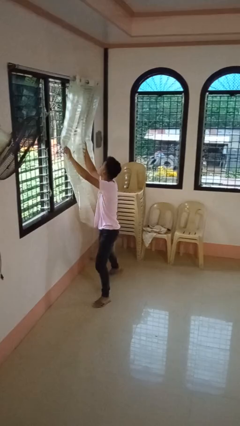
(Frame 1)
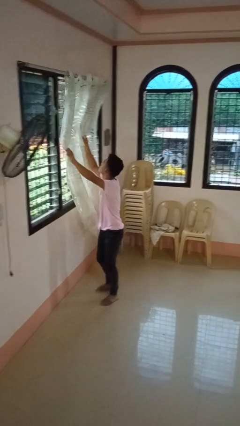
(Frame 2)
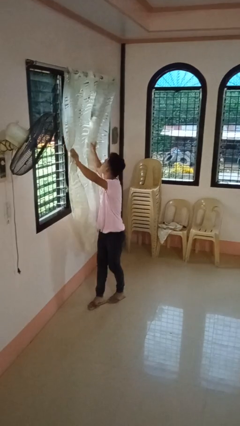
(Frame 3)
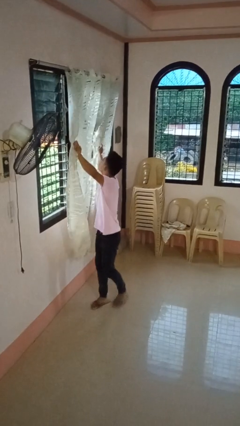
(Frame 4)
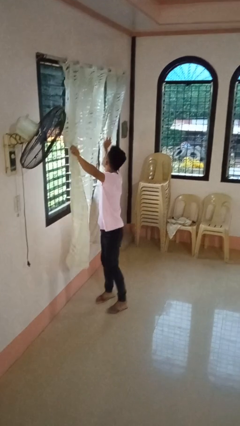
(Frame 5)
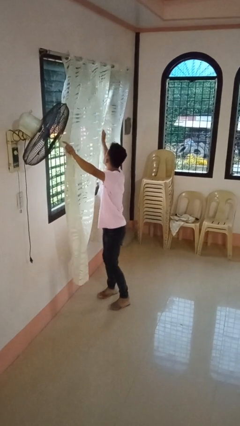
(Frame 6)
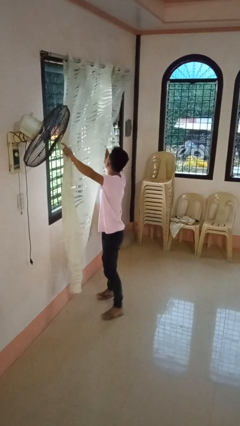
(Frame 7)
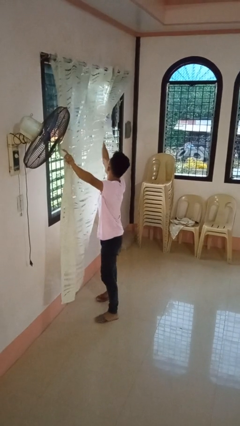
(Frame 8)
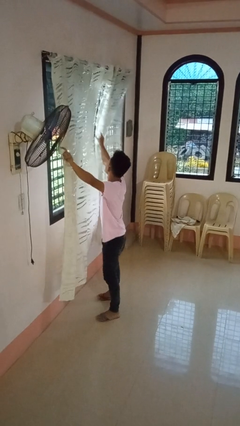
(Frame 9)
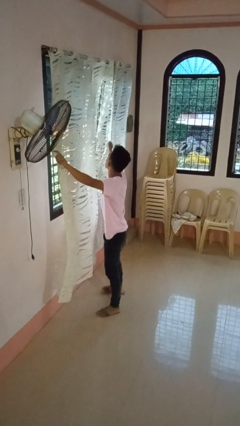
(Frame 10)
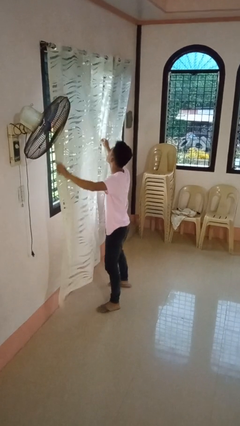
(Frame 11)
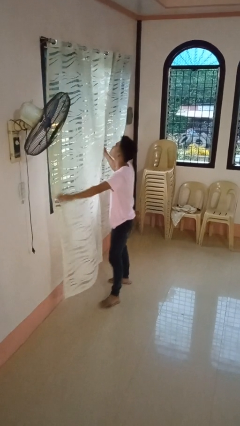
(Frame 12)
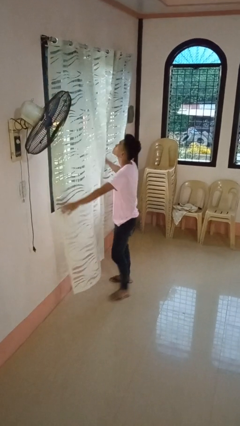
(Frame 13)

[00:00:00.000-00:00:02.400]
person closes curtains

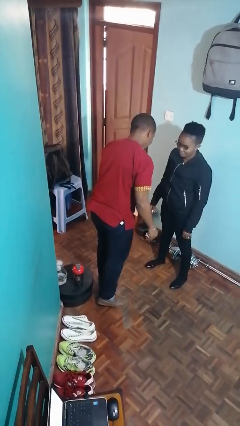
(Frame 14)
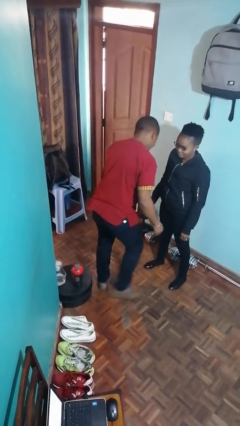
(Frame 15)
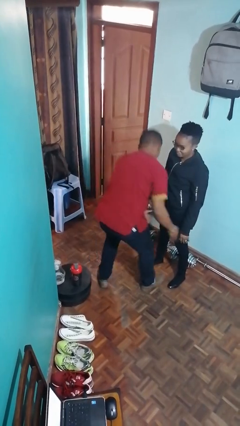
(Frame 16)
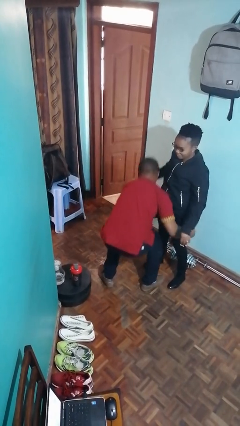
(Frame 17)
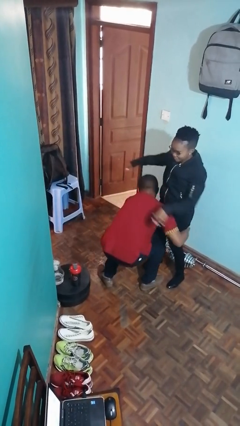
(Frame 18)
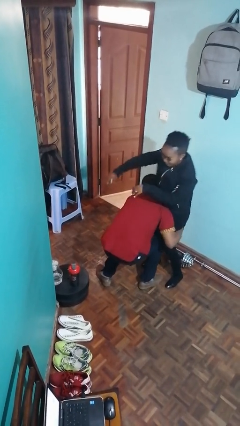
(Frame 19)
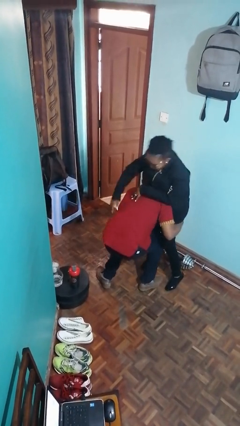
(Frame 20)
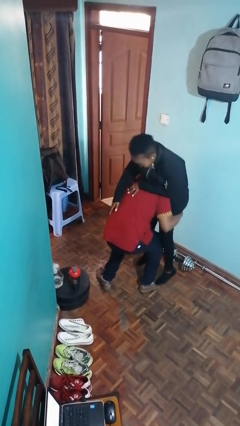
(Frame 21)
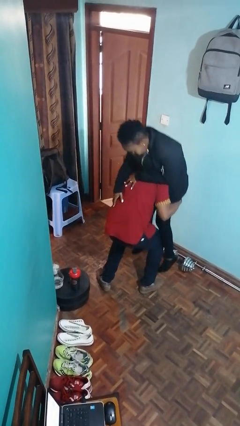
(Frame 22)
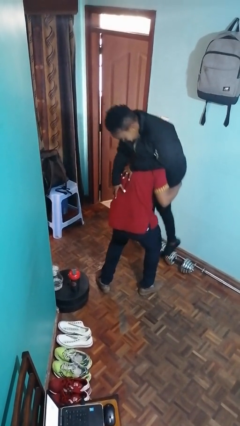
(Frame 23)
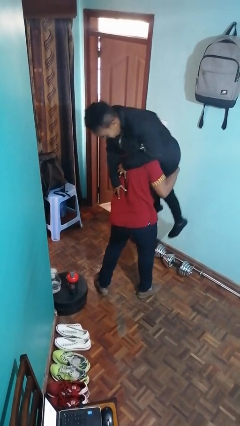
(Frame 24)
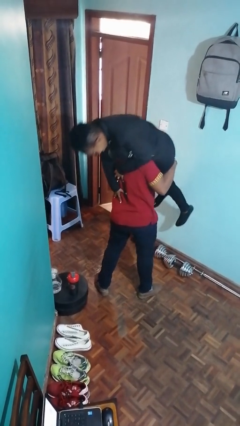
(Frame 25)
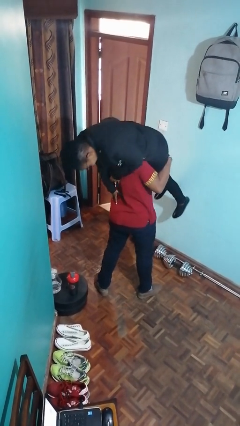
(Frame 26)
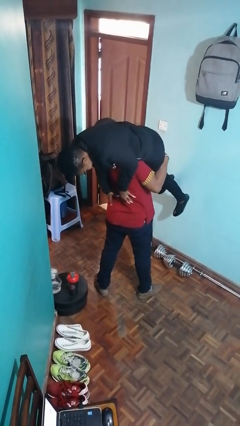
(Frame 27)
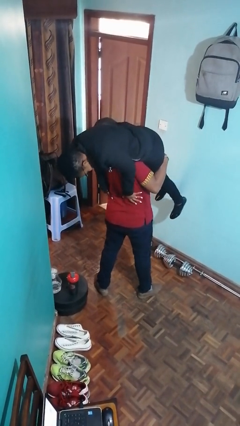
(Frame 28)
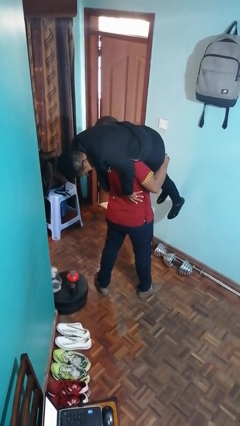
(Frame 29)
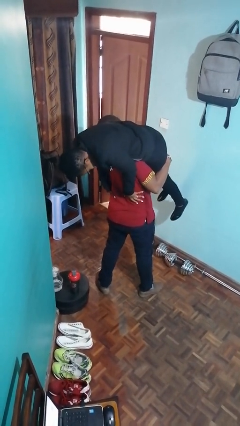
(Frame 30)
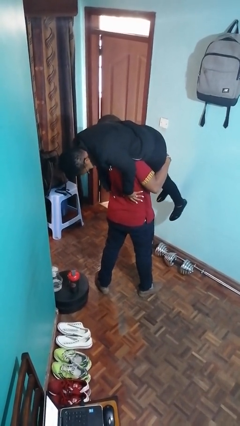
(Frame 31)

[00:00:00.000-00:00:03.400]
person carries person over shoulder

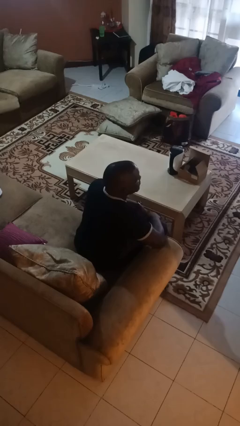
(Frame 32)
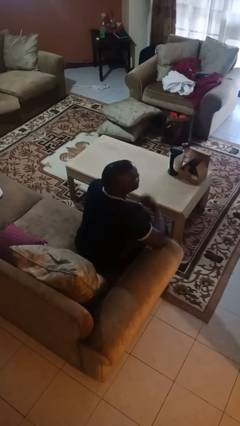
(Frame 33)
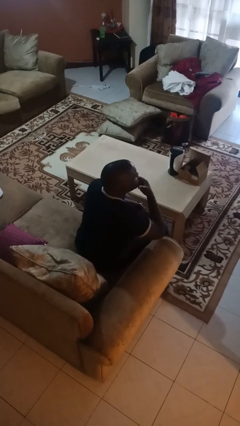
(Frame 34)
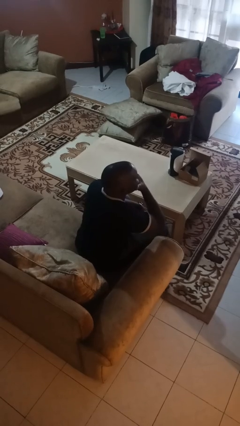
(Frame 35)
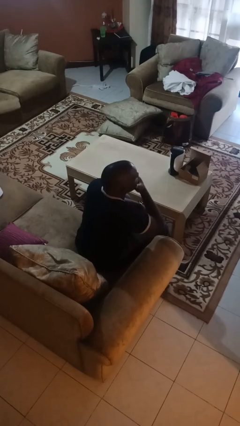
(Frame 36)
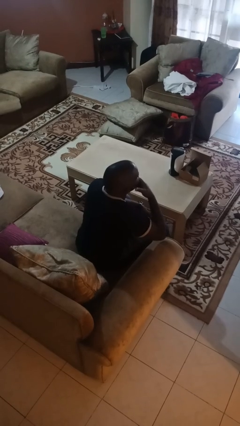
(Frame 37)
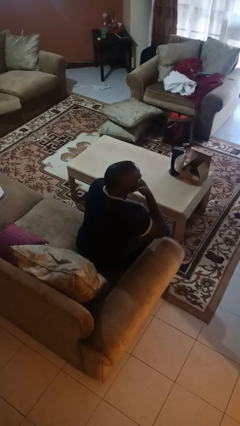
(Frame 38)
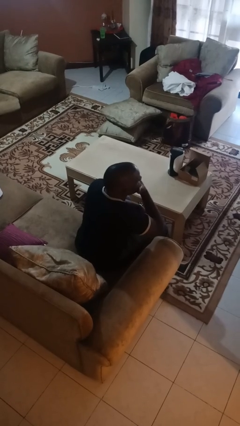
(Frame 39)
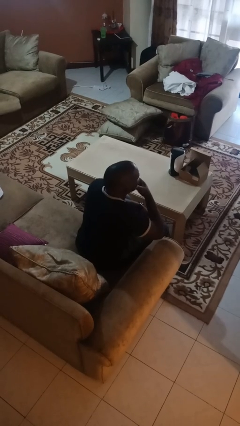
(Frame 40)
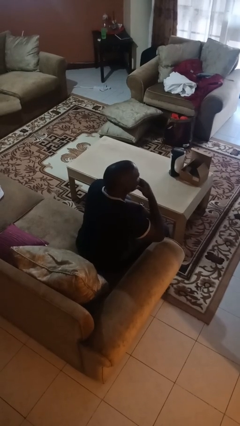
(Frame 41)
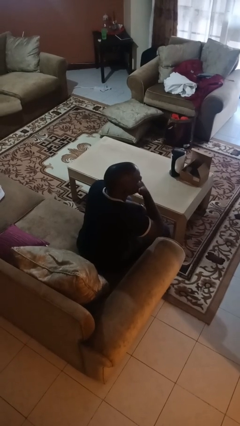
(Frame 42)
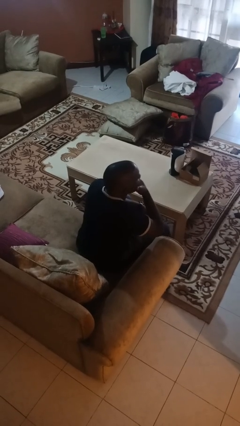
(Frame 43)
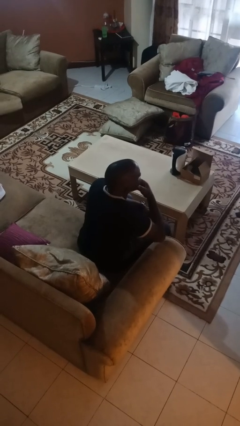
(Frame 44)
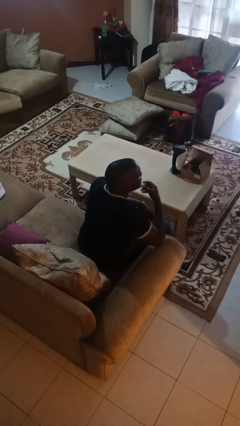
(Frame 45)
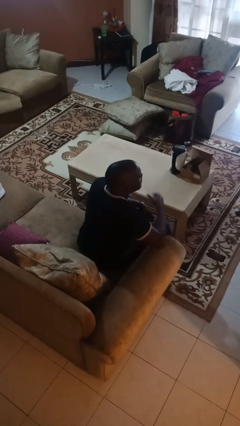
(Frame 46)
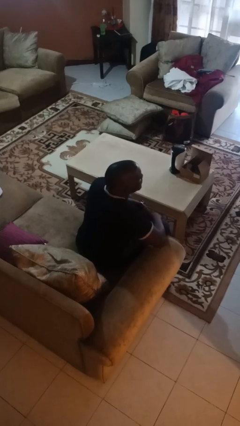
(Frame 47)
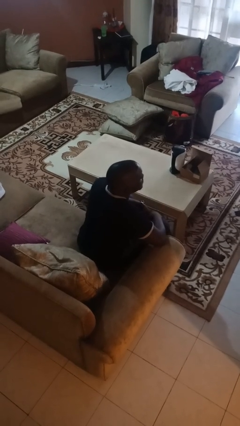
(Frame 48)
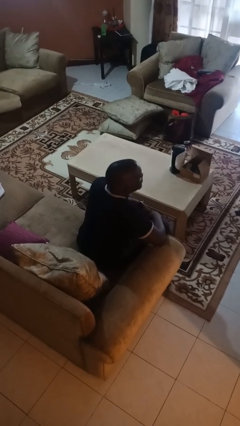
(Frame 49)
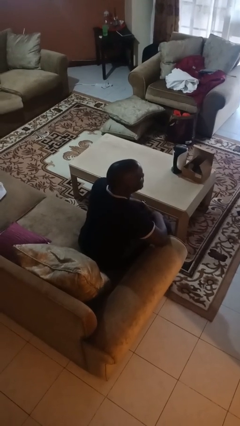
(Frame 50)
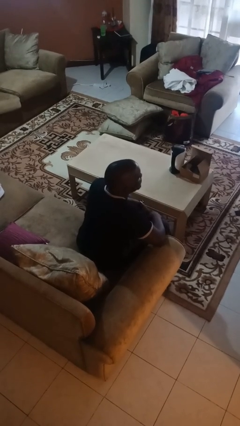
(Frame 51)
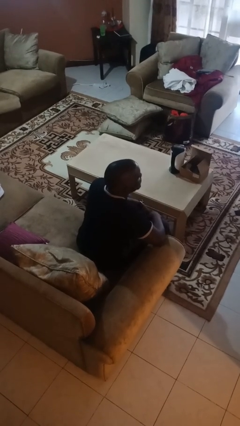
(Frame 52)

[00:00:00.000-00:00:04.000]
person strokes chin

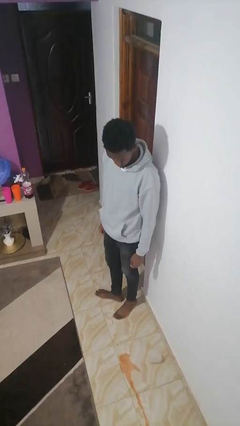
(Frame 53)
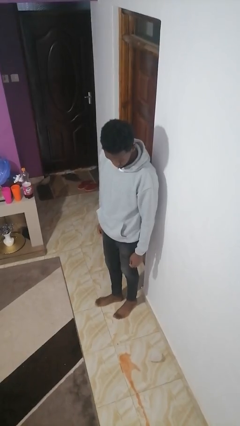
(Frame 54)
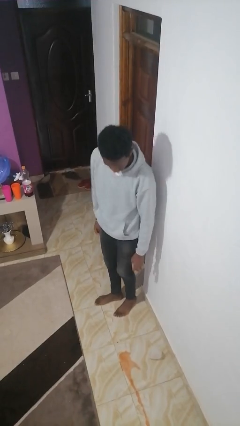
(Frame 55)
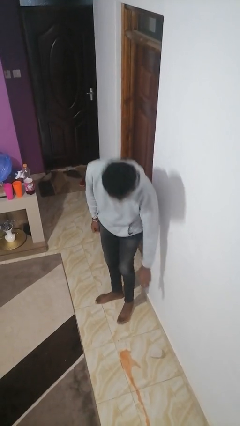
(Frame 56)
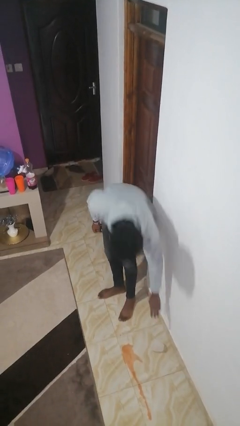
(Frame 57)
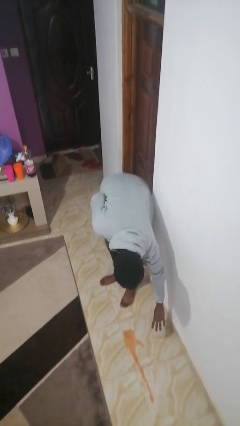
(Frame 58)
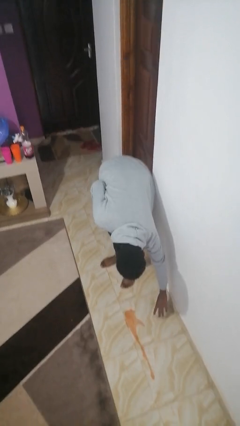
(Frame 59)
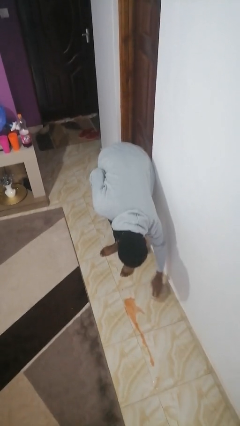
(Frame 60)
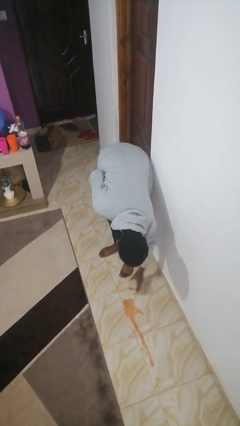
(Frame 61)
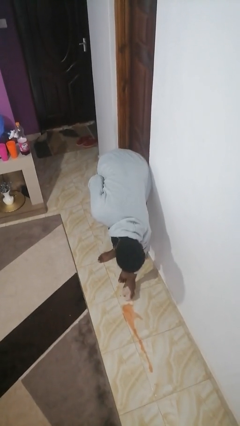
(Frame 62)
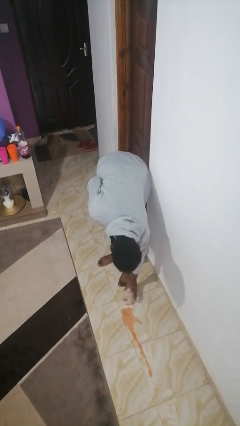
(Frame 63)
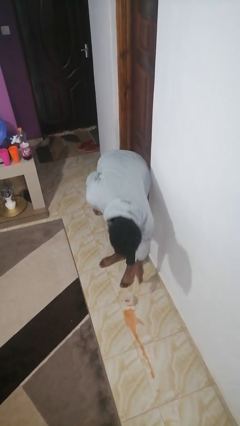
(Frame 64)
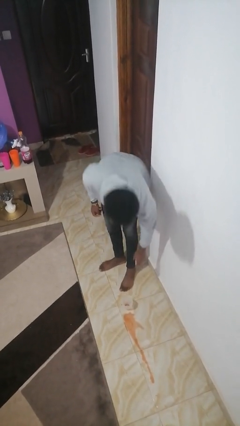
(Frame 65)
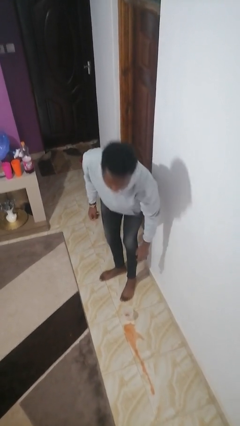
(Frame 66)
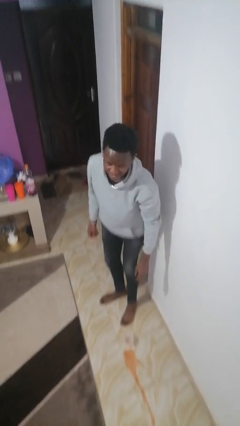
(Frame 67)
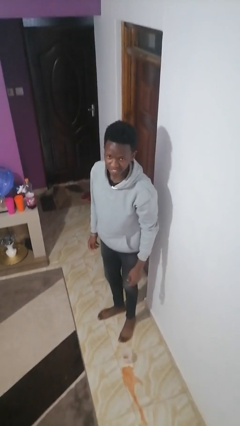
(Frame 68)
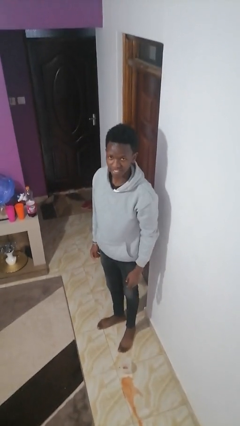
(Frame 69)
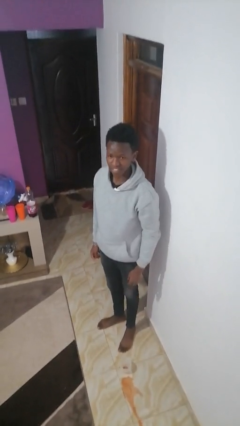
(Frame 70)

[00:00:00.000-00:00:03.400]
person sets upright glass

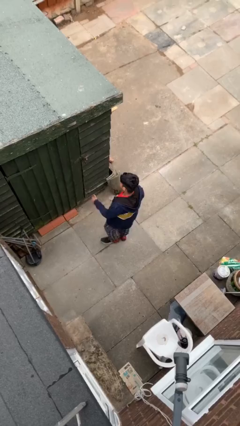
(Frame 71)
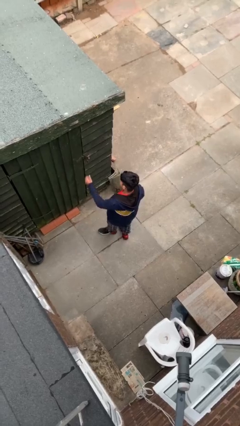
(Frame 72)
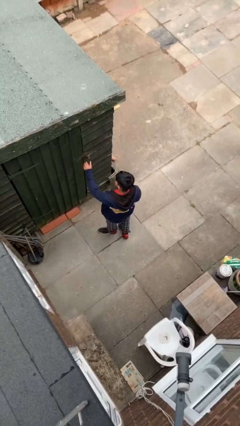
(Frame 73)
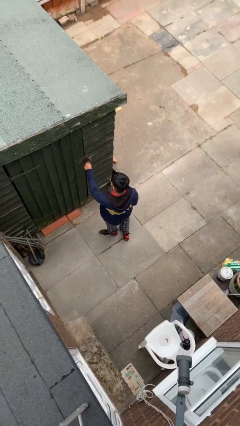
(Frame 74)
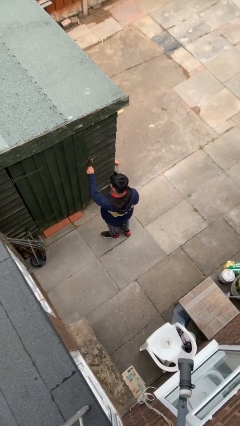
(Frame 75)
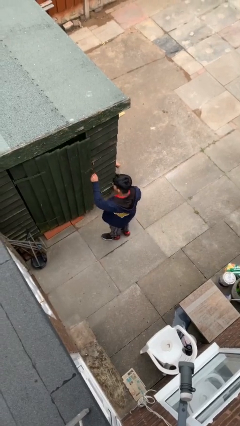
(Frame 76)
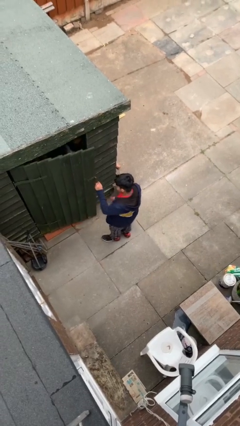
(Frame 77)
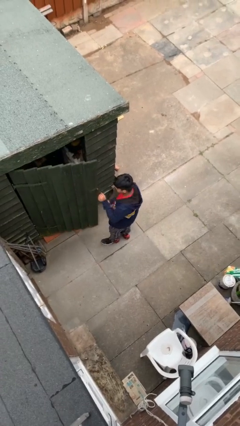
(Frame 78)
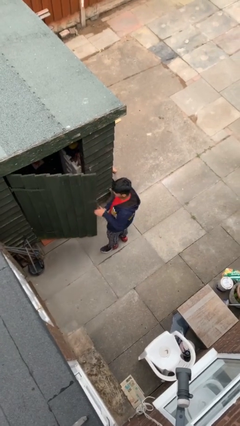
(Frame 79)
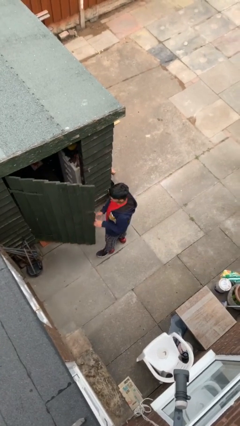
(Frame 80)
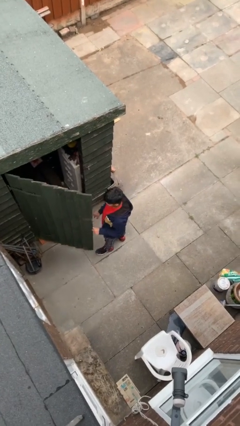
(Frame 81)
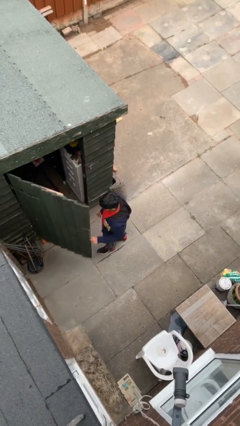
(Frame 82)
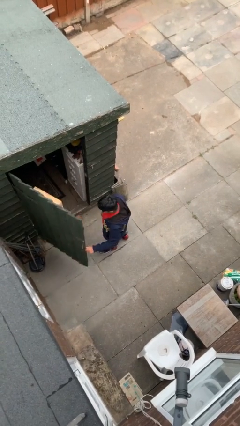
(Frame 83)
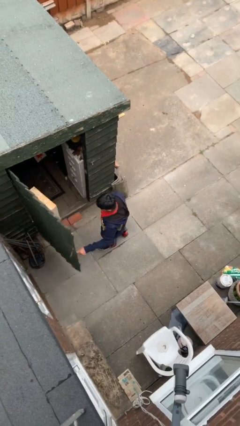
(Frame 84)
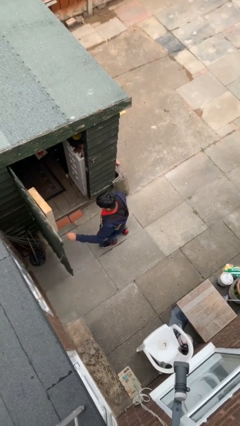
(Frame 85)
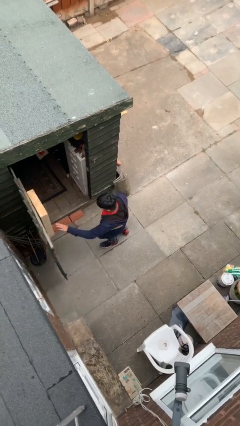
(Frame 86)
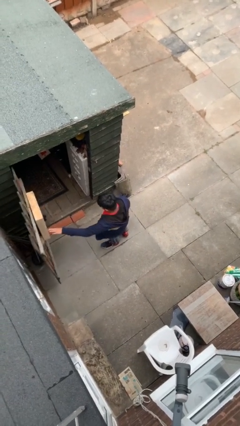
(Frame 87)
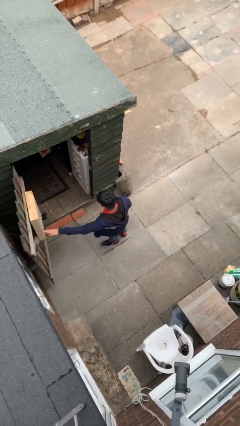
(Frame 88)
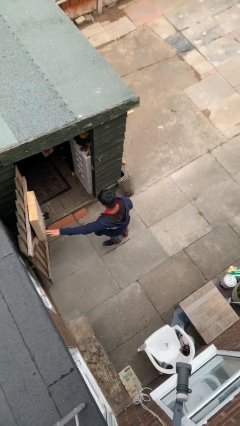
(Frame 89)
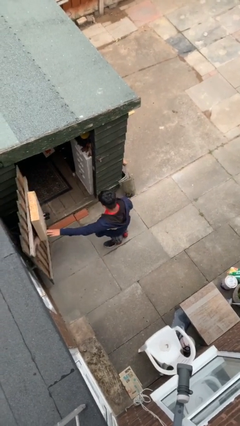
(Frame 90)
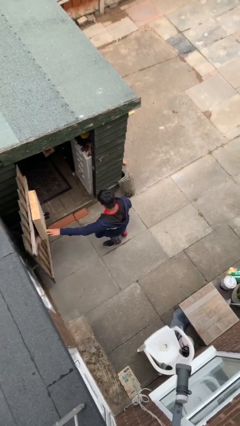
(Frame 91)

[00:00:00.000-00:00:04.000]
person opens facility door

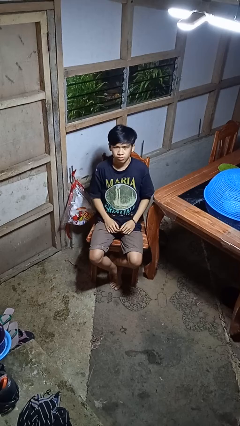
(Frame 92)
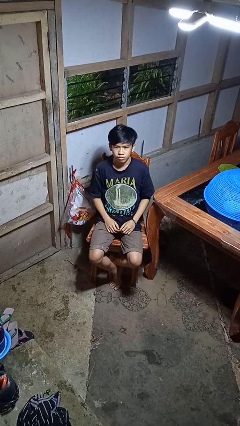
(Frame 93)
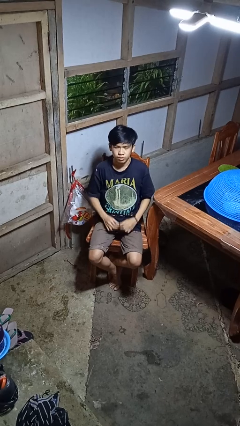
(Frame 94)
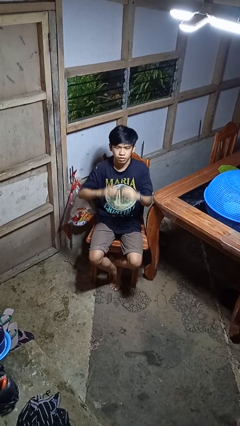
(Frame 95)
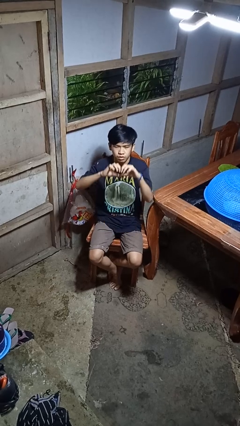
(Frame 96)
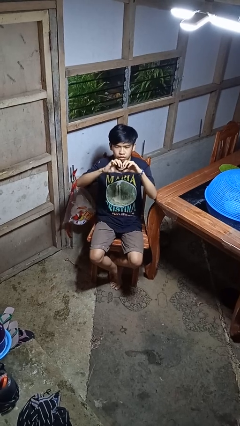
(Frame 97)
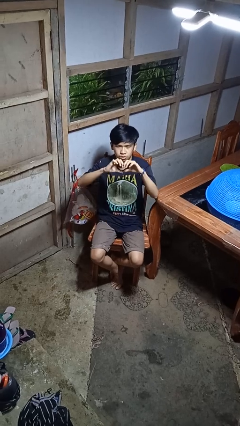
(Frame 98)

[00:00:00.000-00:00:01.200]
person gestures heart
